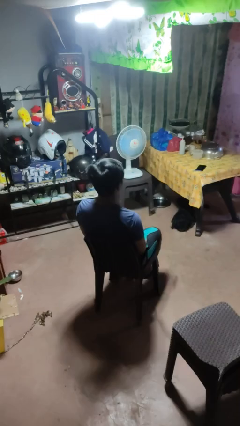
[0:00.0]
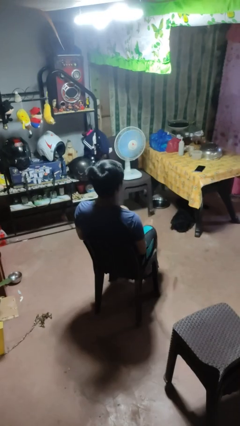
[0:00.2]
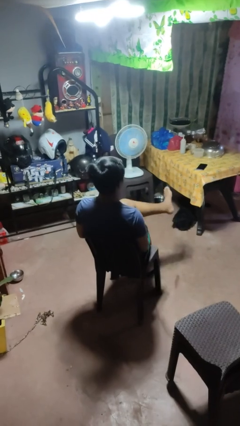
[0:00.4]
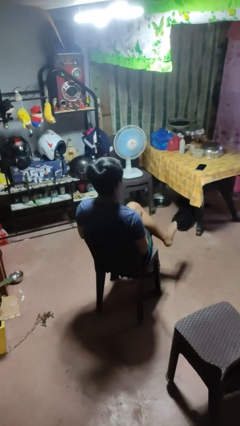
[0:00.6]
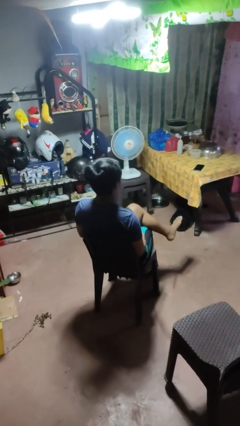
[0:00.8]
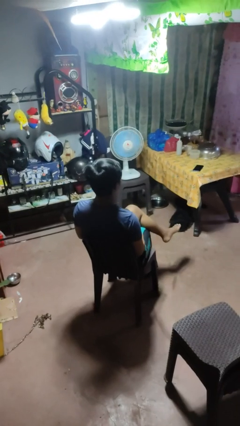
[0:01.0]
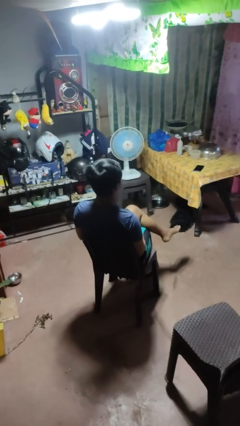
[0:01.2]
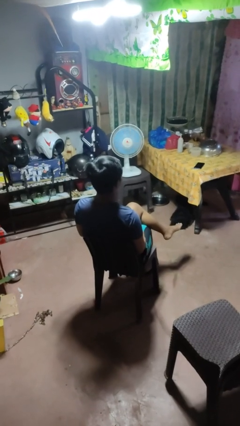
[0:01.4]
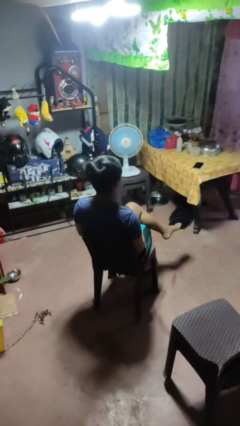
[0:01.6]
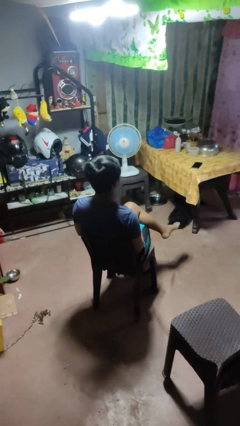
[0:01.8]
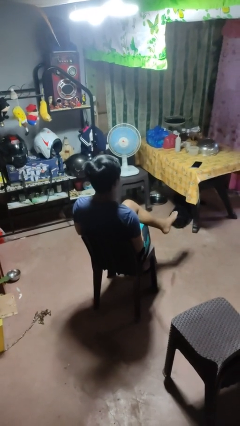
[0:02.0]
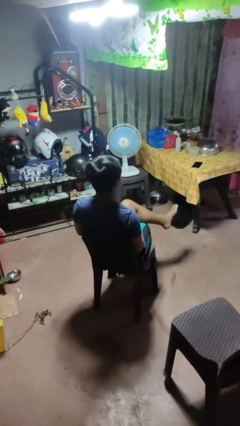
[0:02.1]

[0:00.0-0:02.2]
person crosses legs

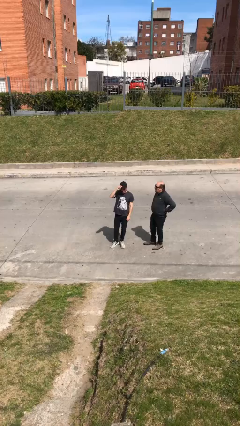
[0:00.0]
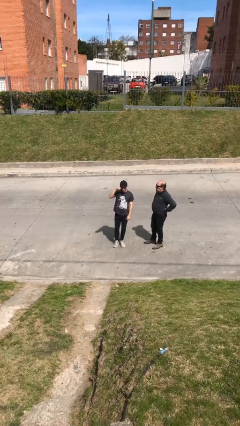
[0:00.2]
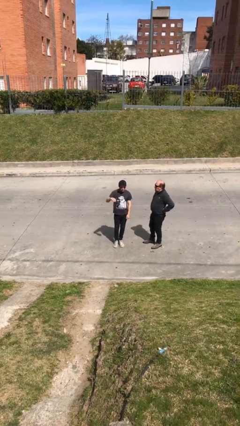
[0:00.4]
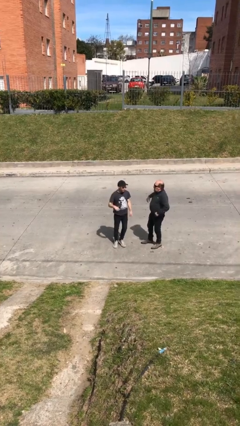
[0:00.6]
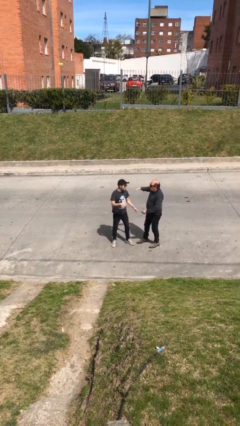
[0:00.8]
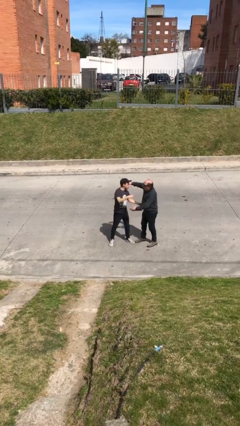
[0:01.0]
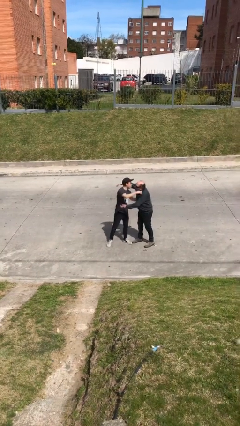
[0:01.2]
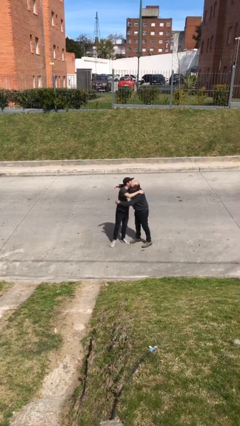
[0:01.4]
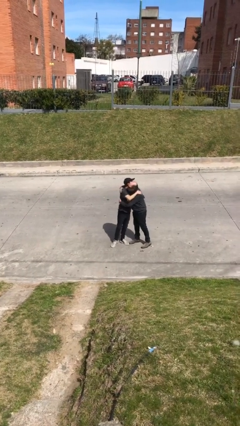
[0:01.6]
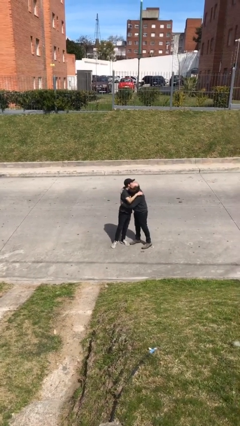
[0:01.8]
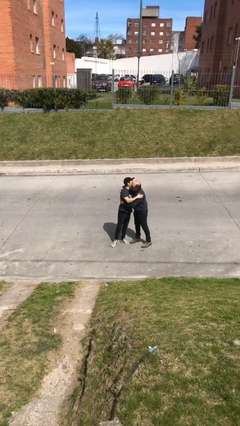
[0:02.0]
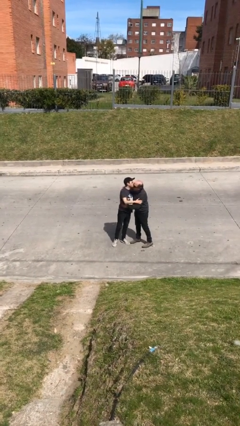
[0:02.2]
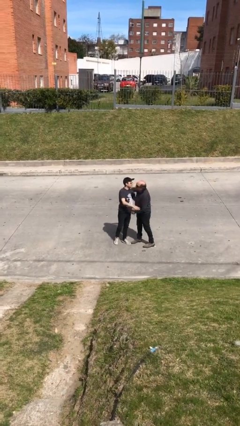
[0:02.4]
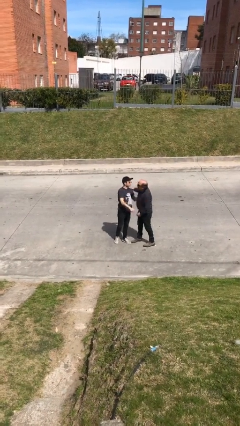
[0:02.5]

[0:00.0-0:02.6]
person embraces person

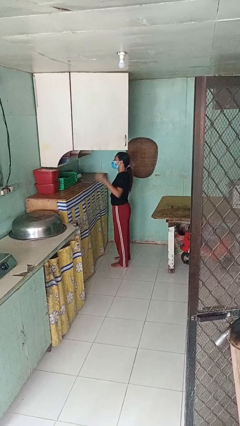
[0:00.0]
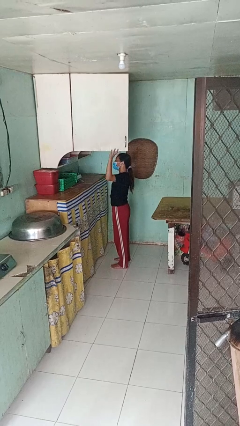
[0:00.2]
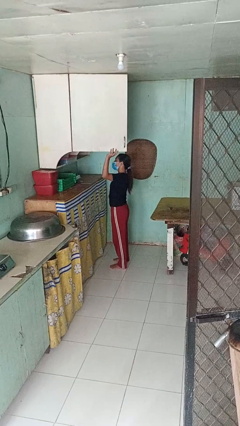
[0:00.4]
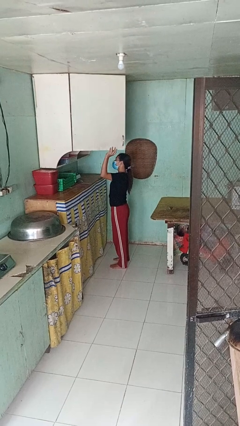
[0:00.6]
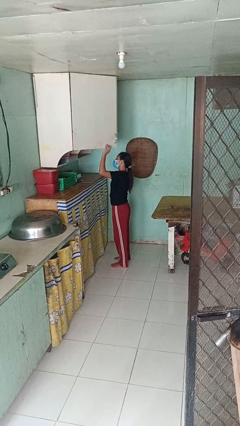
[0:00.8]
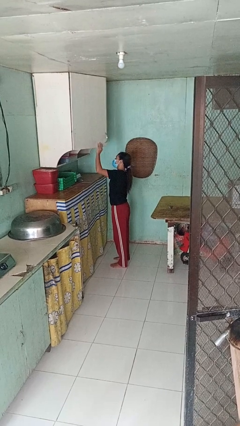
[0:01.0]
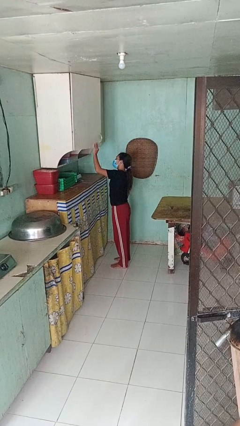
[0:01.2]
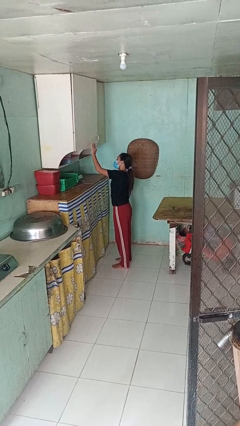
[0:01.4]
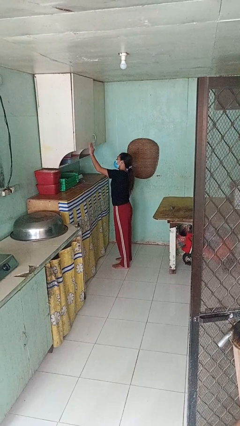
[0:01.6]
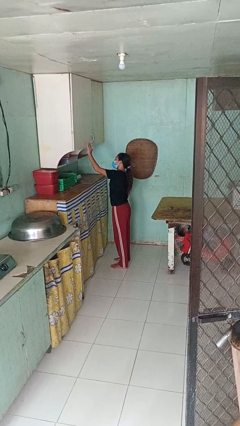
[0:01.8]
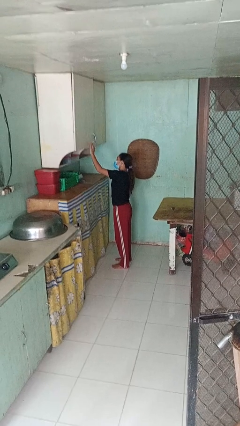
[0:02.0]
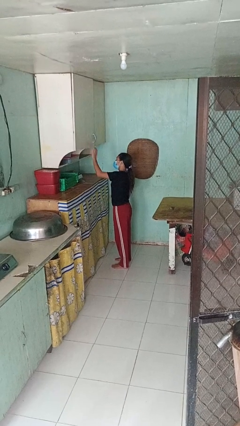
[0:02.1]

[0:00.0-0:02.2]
person closes cabinet

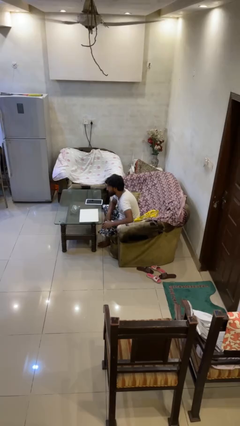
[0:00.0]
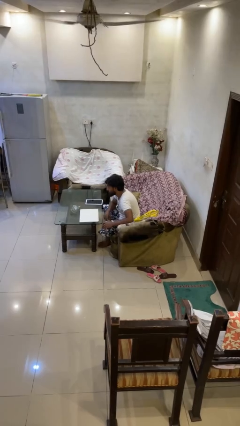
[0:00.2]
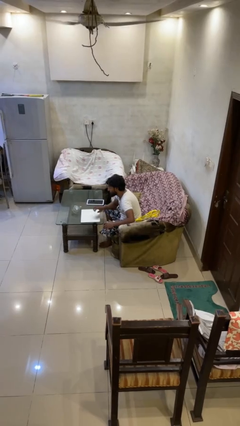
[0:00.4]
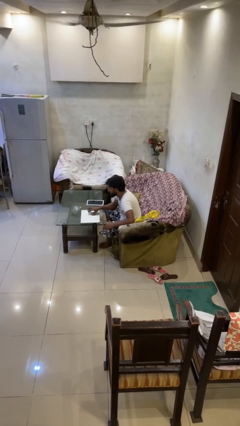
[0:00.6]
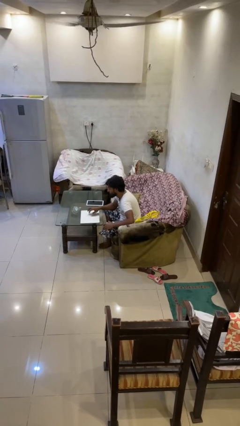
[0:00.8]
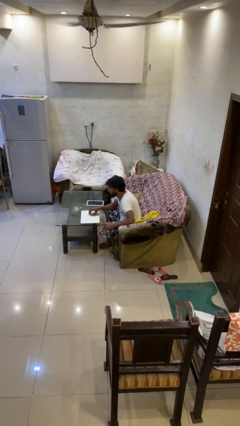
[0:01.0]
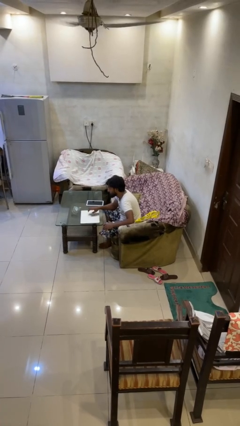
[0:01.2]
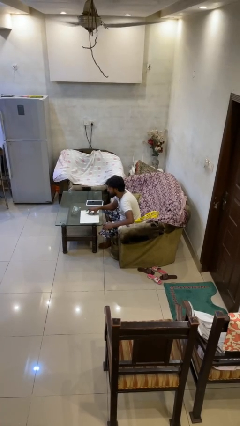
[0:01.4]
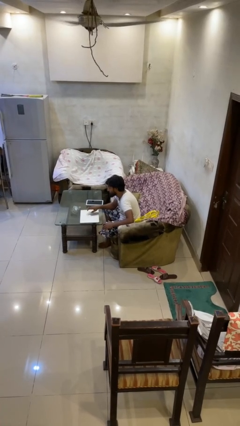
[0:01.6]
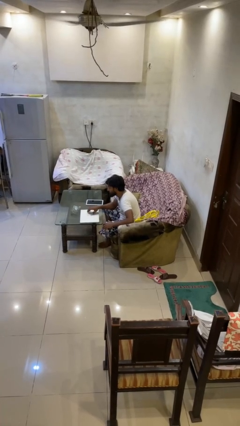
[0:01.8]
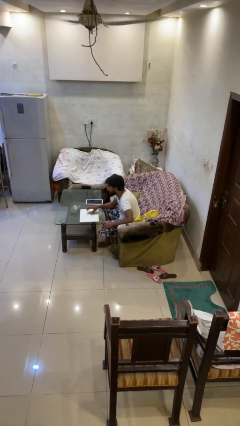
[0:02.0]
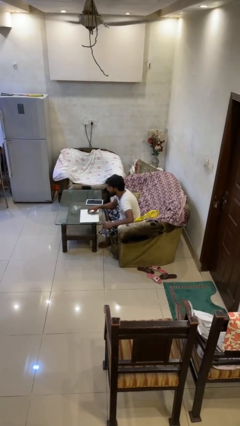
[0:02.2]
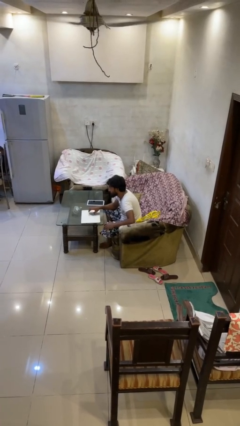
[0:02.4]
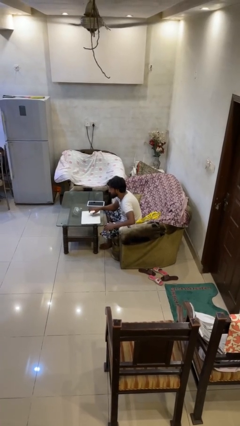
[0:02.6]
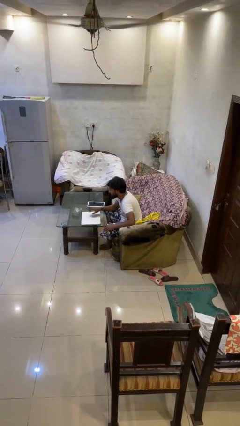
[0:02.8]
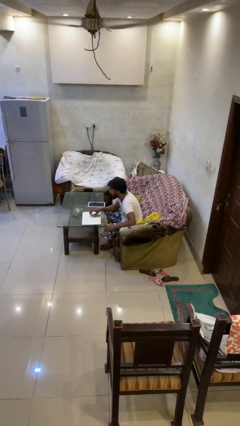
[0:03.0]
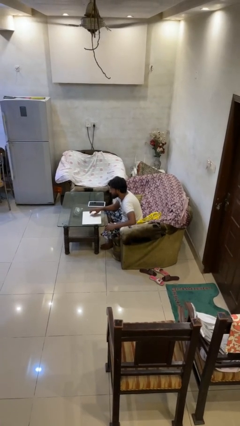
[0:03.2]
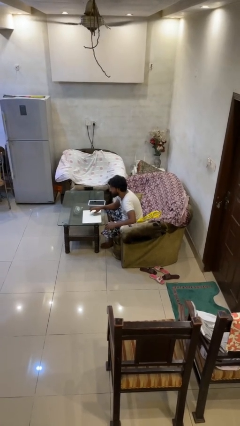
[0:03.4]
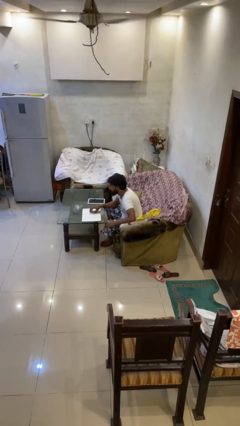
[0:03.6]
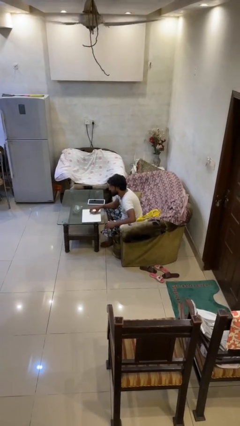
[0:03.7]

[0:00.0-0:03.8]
person taps object with finger

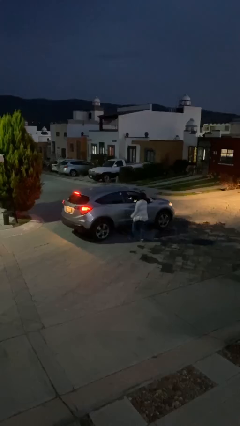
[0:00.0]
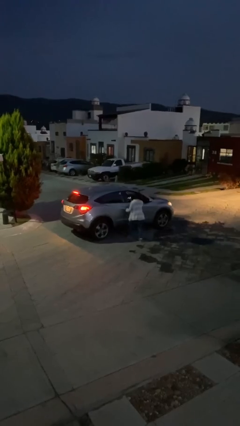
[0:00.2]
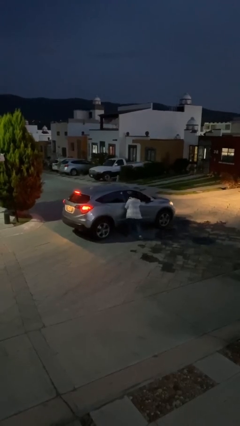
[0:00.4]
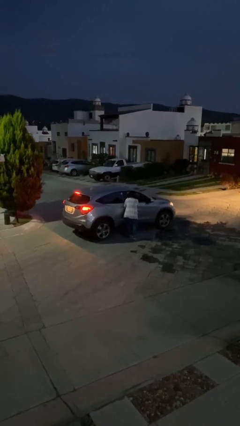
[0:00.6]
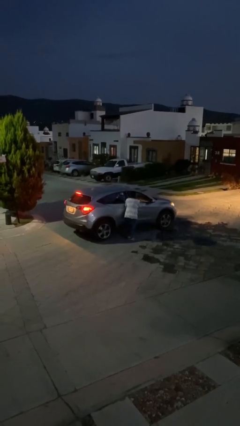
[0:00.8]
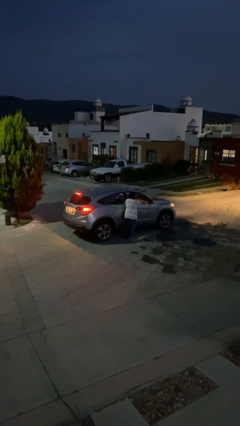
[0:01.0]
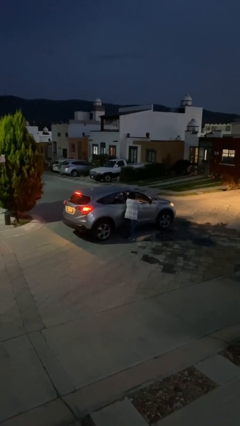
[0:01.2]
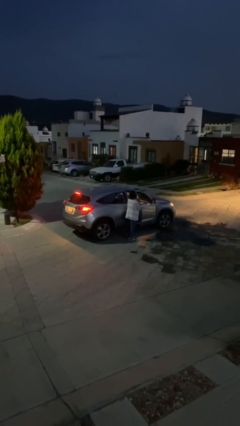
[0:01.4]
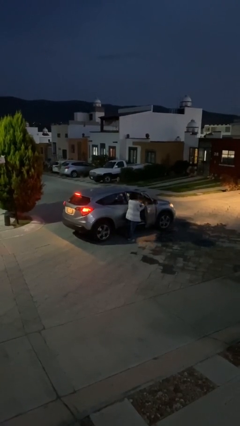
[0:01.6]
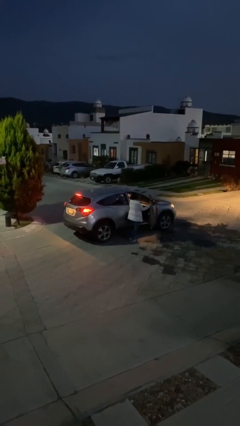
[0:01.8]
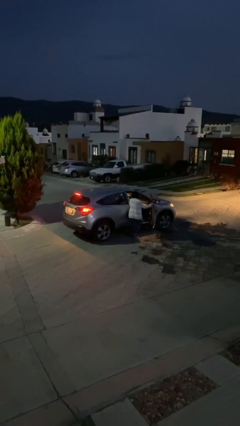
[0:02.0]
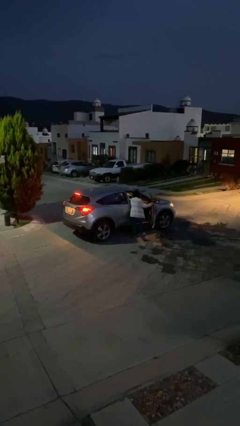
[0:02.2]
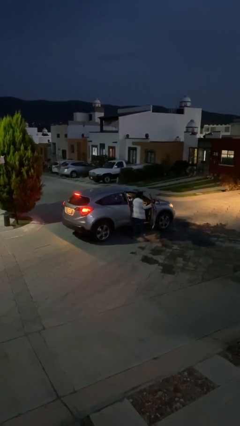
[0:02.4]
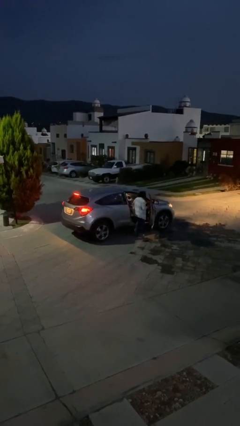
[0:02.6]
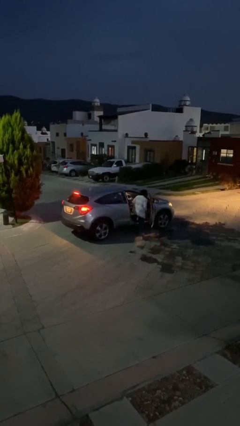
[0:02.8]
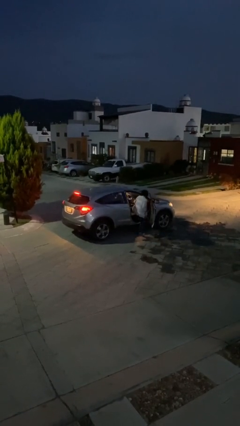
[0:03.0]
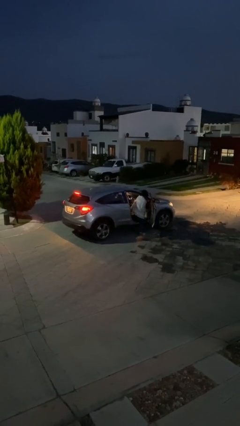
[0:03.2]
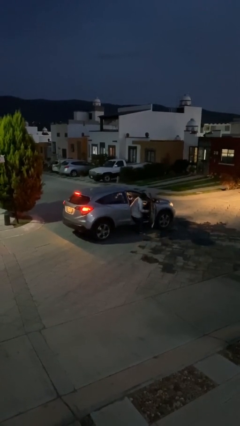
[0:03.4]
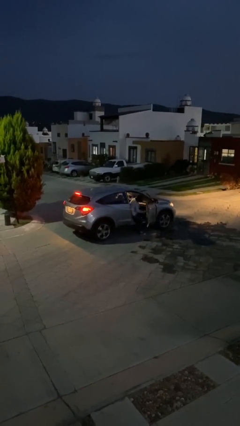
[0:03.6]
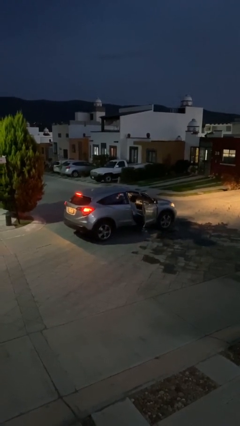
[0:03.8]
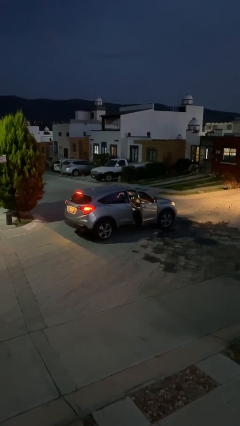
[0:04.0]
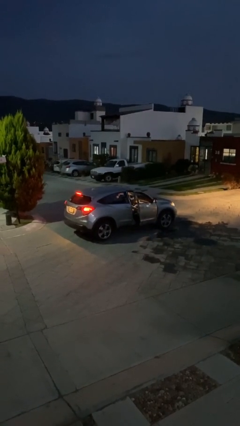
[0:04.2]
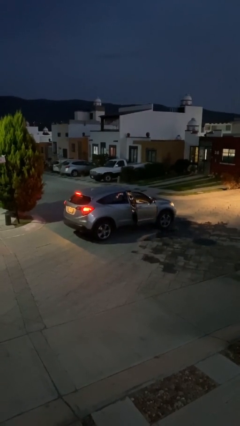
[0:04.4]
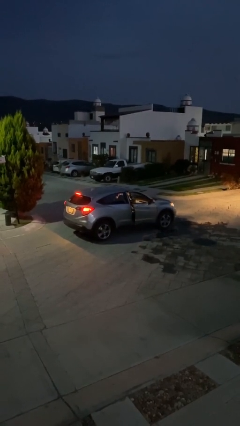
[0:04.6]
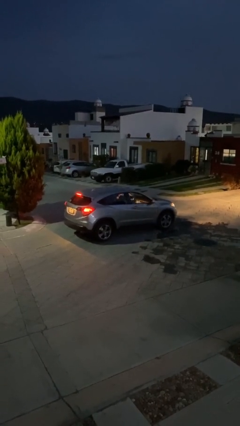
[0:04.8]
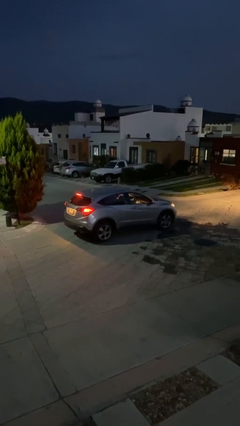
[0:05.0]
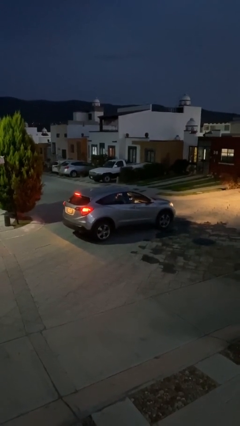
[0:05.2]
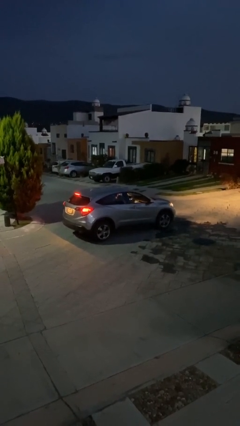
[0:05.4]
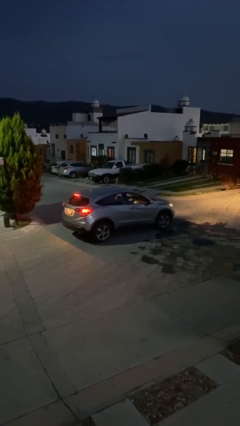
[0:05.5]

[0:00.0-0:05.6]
car picks up person

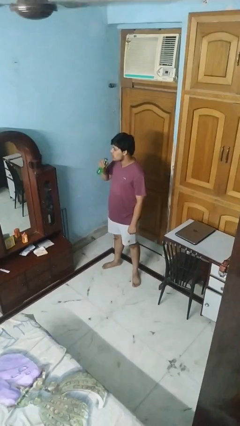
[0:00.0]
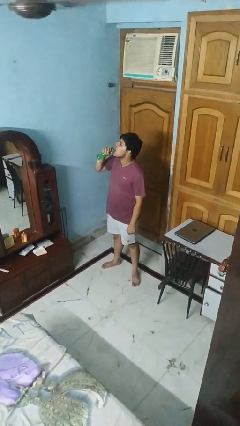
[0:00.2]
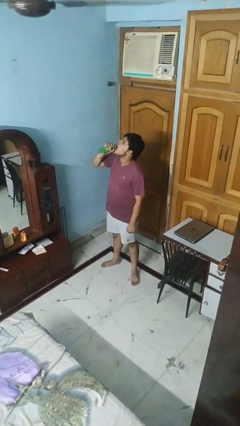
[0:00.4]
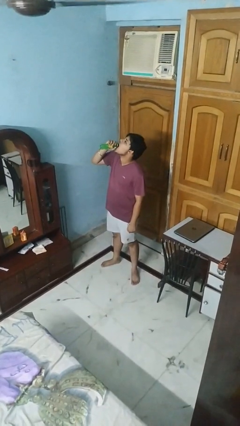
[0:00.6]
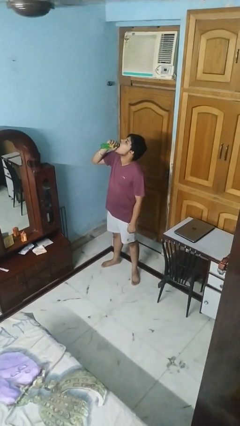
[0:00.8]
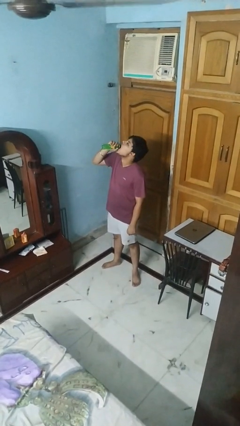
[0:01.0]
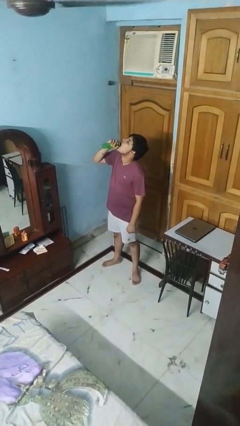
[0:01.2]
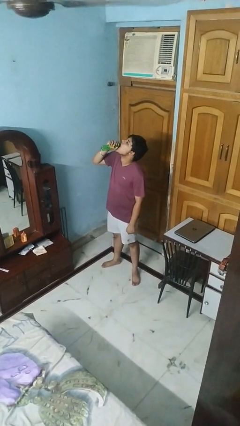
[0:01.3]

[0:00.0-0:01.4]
person drinks from bottle
